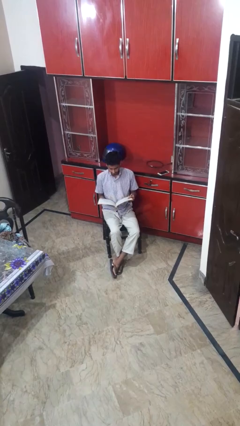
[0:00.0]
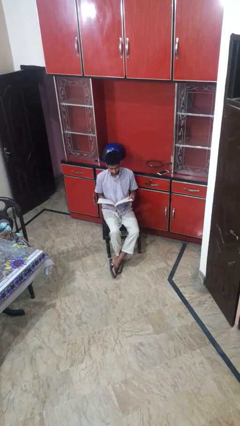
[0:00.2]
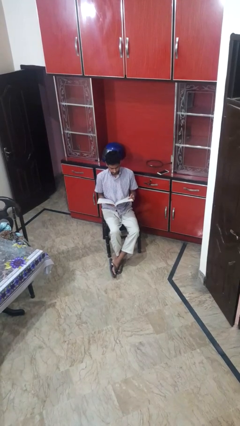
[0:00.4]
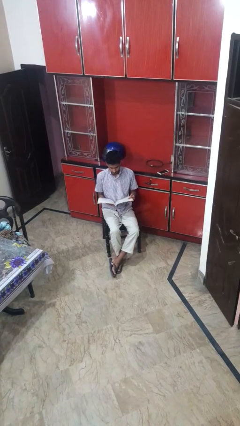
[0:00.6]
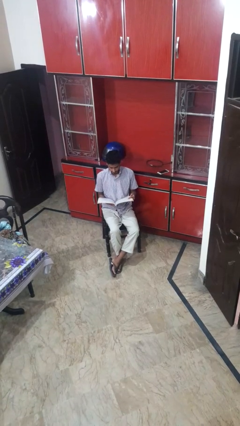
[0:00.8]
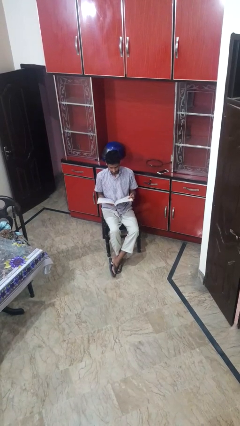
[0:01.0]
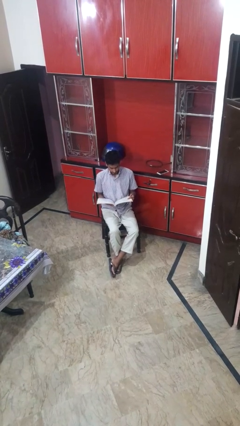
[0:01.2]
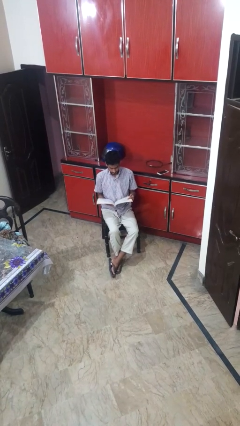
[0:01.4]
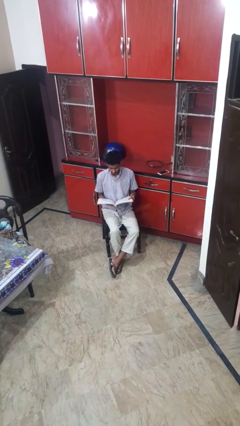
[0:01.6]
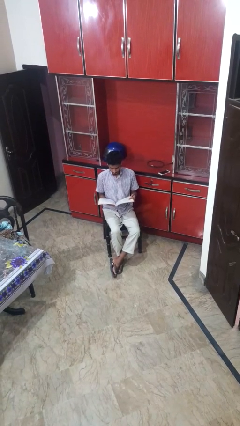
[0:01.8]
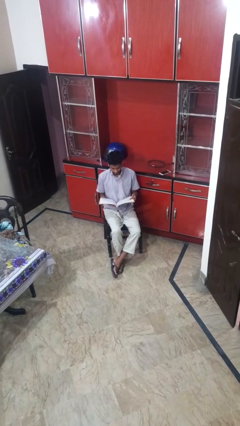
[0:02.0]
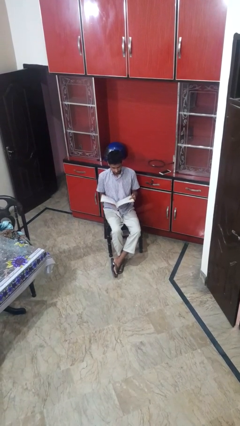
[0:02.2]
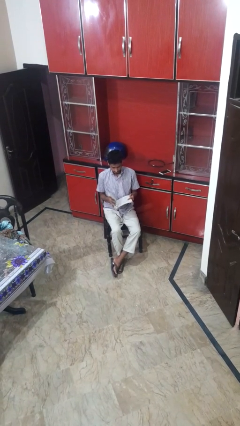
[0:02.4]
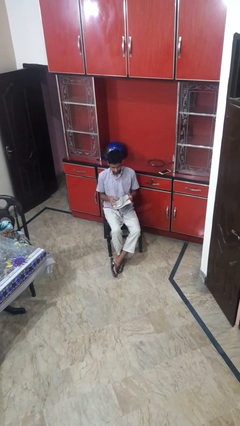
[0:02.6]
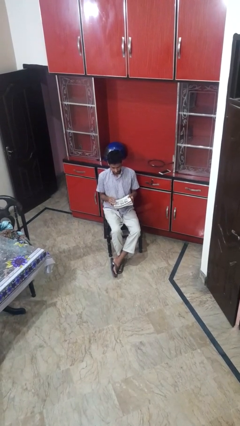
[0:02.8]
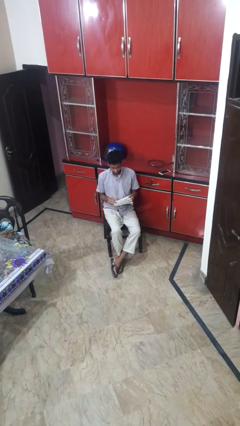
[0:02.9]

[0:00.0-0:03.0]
person reads magazine

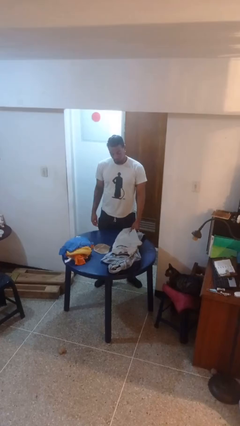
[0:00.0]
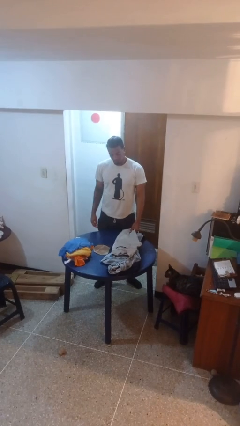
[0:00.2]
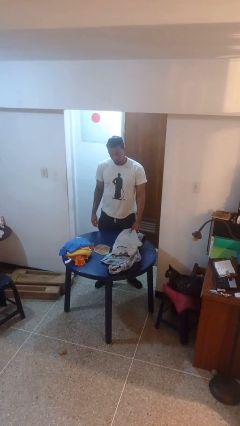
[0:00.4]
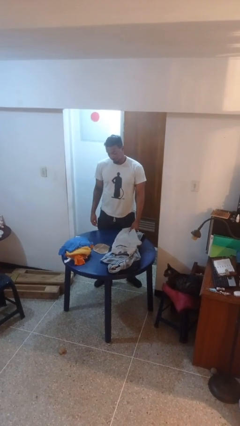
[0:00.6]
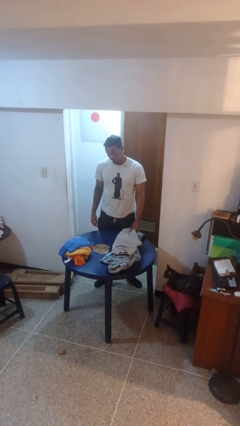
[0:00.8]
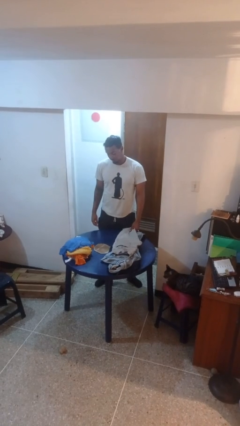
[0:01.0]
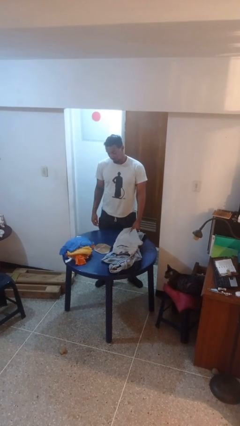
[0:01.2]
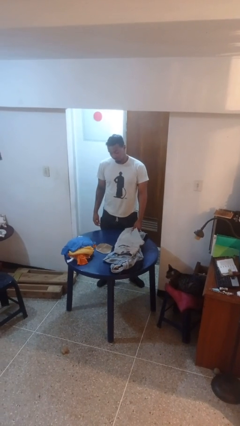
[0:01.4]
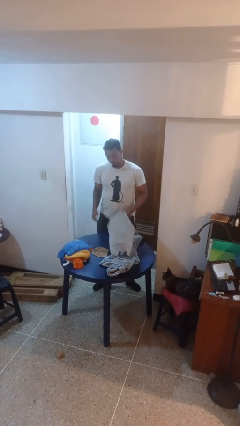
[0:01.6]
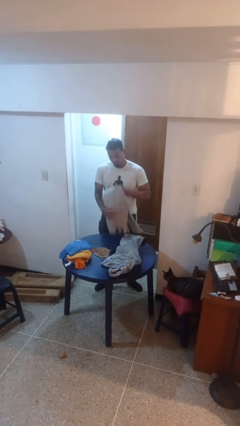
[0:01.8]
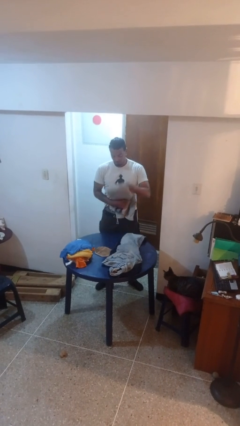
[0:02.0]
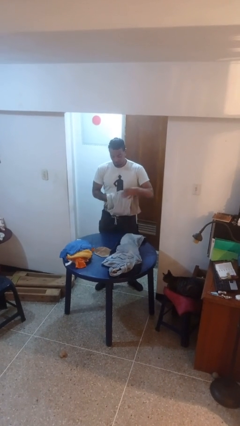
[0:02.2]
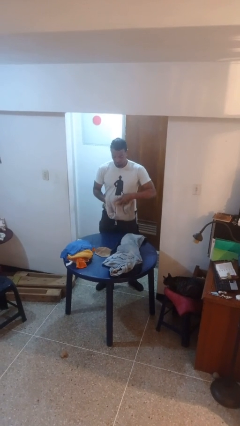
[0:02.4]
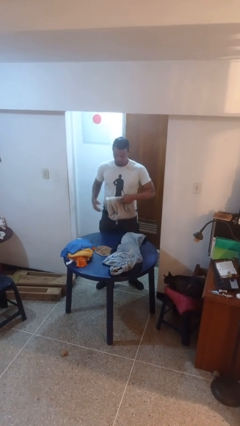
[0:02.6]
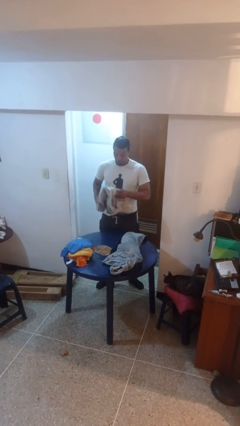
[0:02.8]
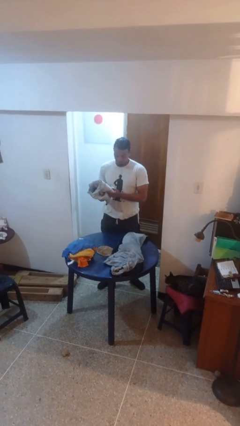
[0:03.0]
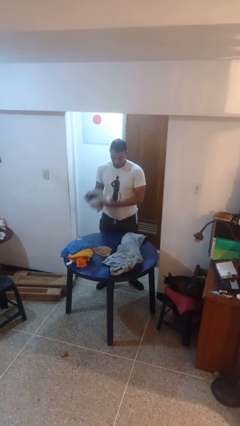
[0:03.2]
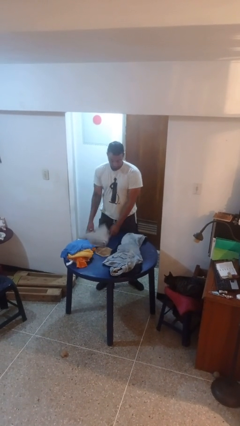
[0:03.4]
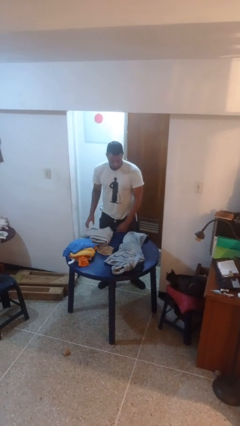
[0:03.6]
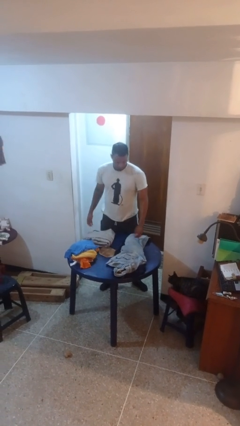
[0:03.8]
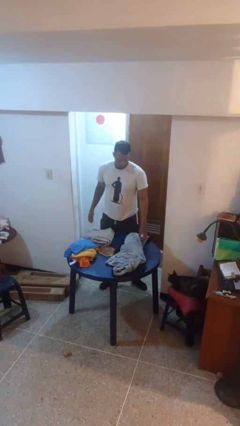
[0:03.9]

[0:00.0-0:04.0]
person folds pants

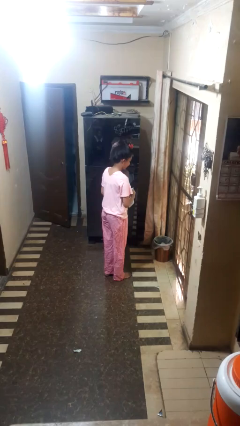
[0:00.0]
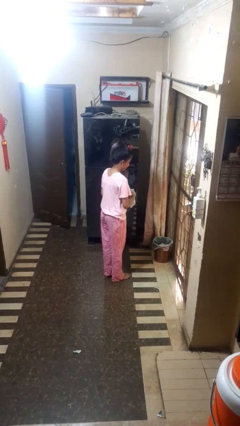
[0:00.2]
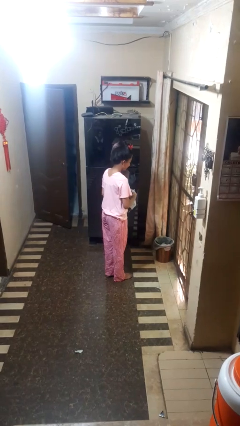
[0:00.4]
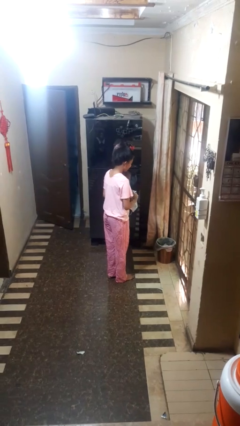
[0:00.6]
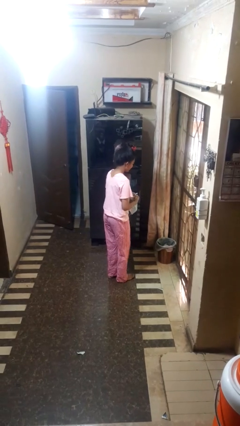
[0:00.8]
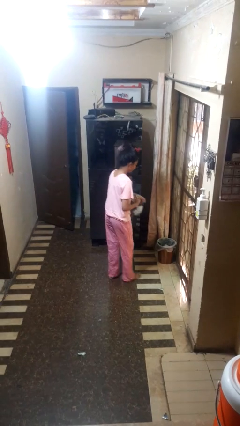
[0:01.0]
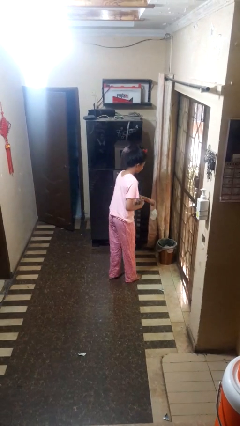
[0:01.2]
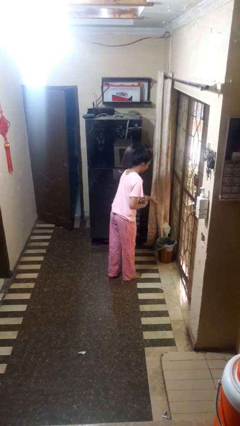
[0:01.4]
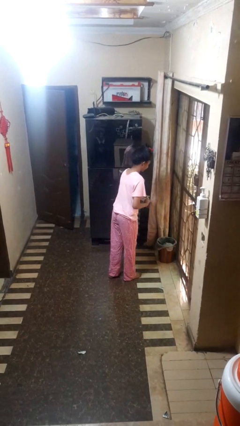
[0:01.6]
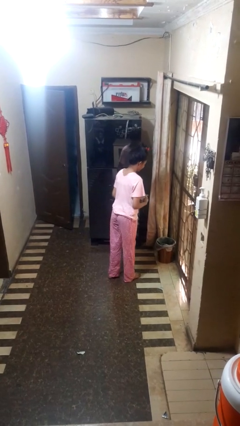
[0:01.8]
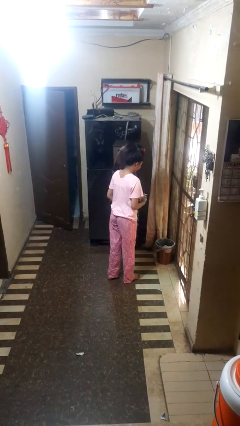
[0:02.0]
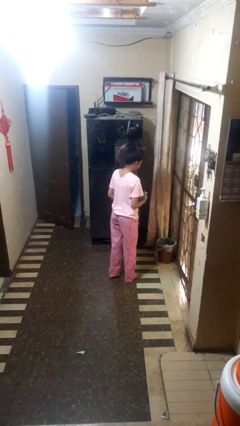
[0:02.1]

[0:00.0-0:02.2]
person discards trash

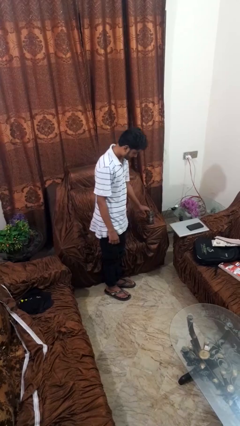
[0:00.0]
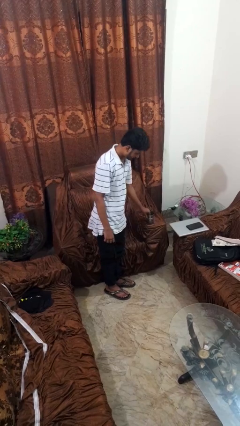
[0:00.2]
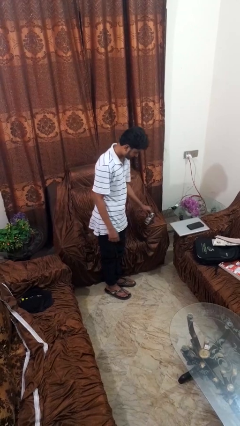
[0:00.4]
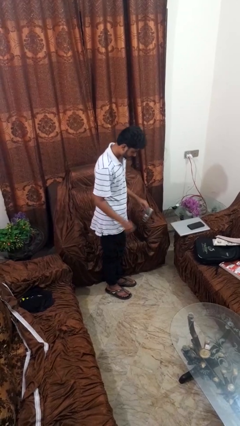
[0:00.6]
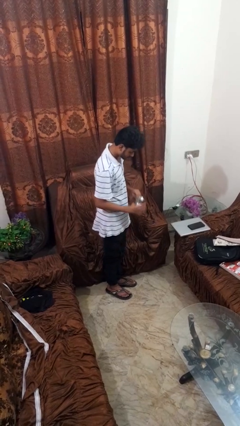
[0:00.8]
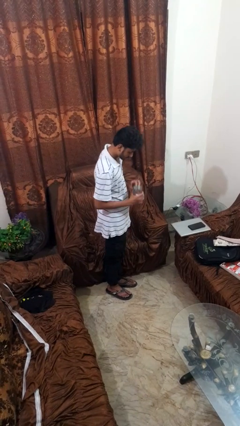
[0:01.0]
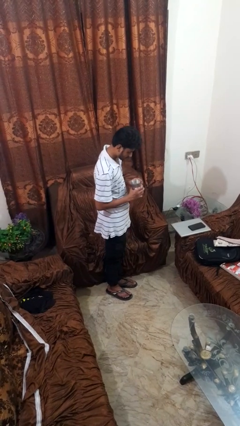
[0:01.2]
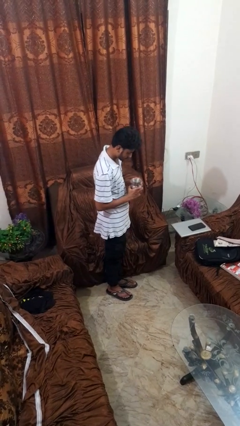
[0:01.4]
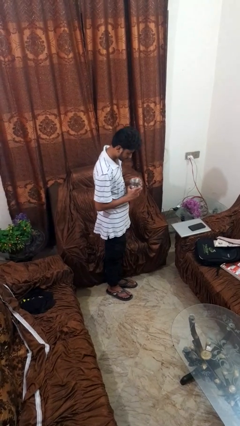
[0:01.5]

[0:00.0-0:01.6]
person picks up object from couch

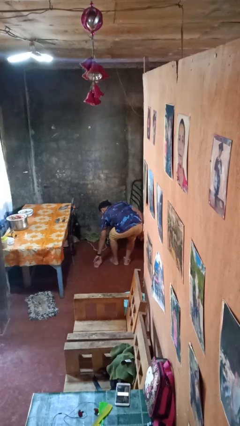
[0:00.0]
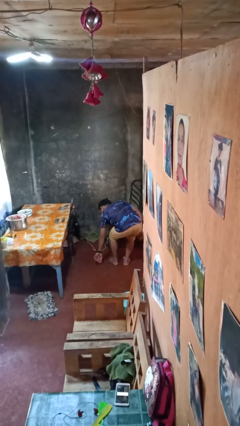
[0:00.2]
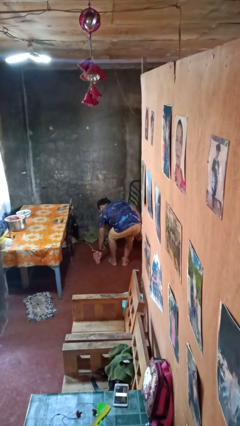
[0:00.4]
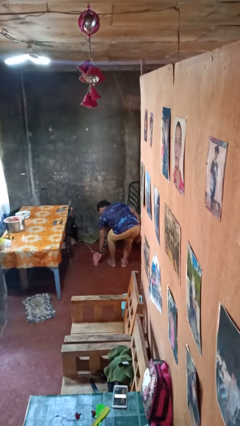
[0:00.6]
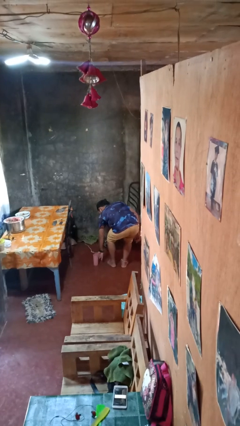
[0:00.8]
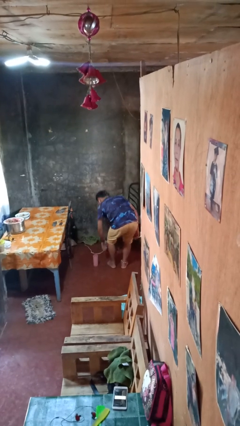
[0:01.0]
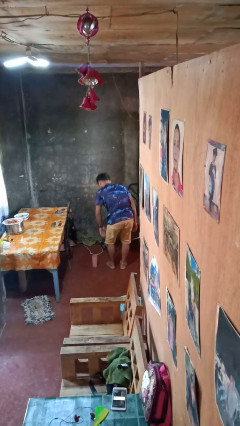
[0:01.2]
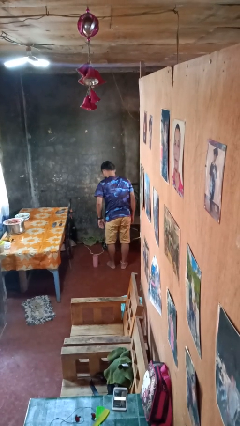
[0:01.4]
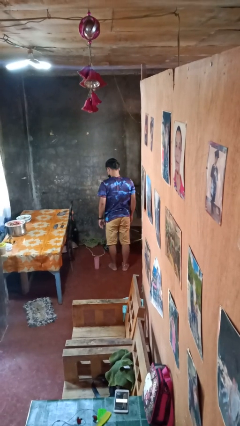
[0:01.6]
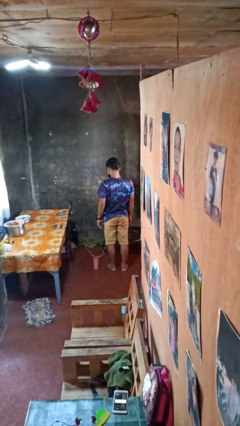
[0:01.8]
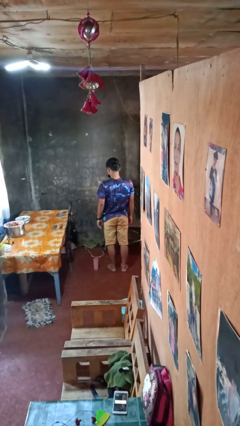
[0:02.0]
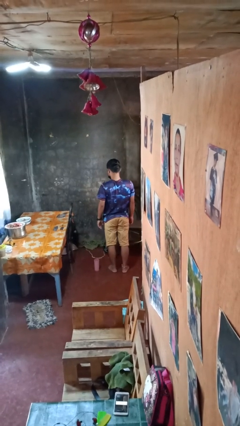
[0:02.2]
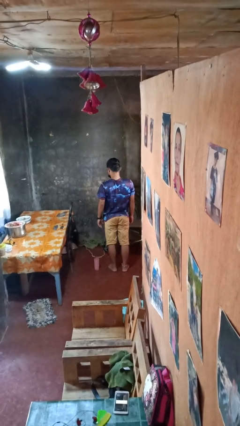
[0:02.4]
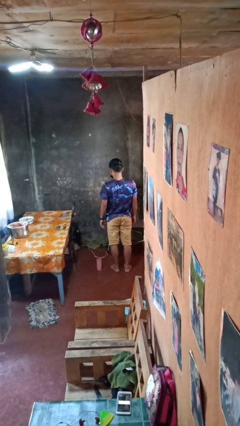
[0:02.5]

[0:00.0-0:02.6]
person sets upright glass

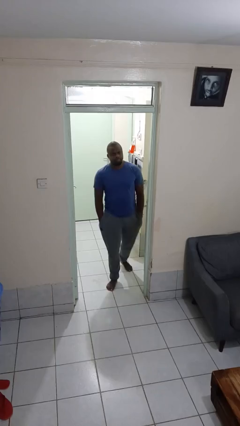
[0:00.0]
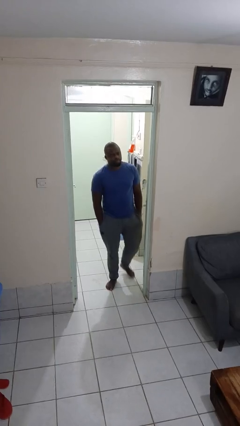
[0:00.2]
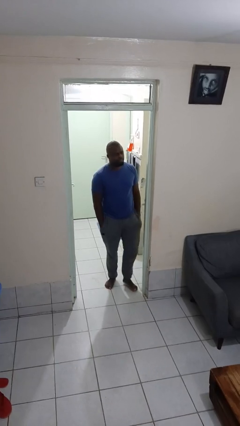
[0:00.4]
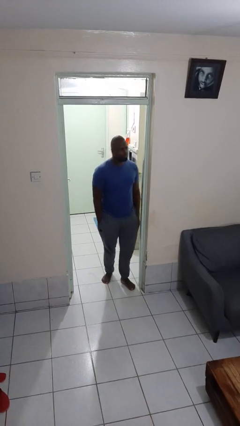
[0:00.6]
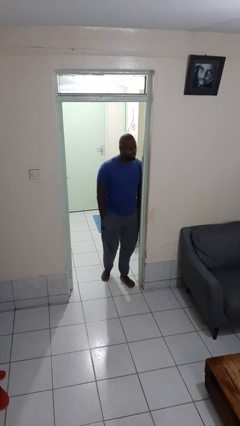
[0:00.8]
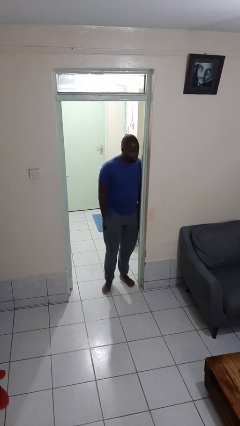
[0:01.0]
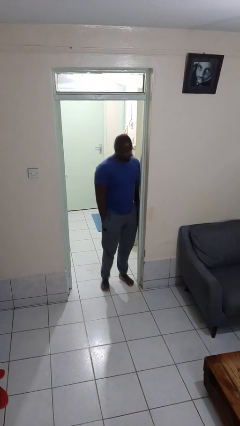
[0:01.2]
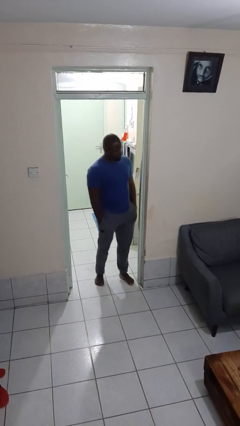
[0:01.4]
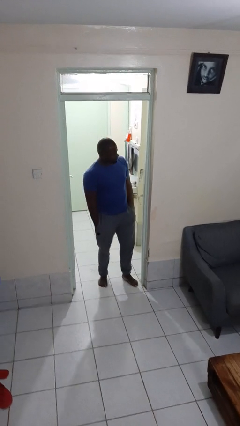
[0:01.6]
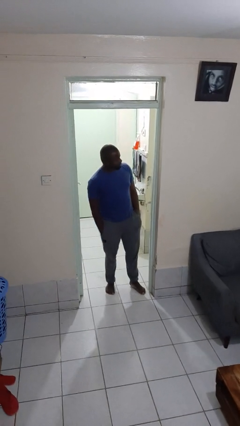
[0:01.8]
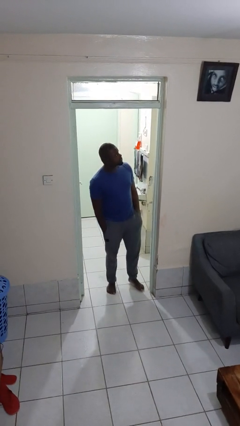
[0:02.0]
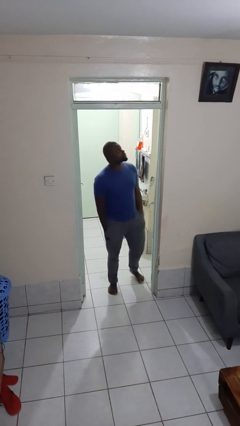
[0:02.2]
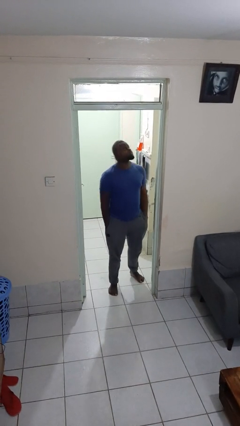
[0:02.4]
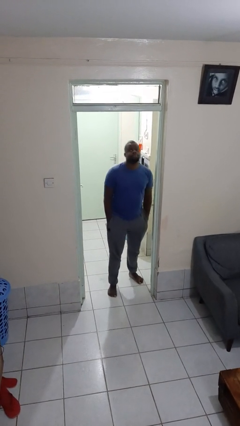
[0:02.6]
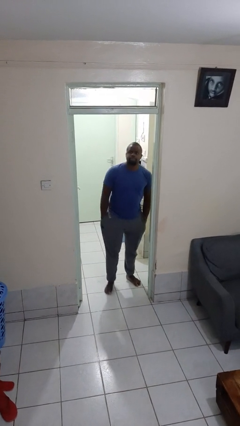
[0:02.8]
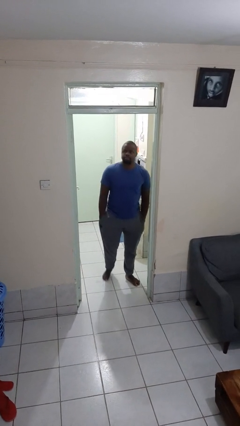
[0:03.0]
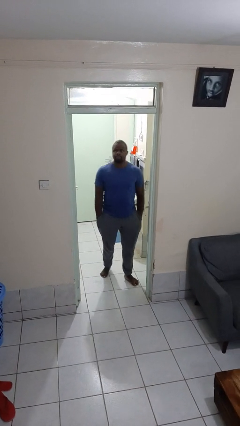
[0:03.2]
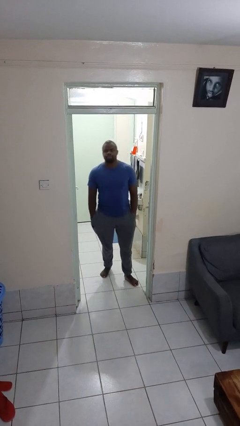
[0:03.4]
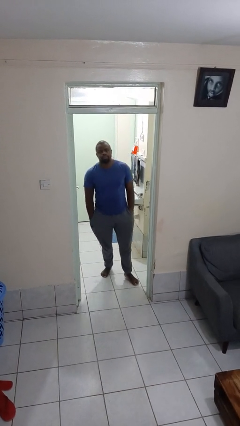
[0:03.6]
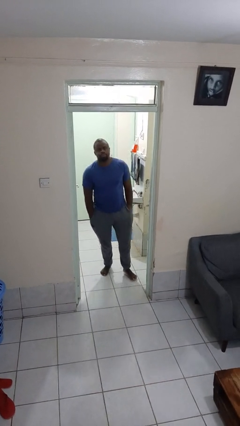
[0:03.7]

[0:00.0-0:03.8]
person bumps into wall

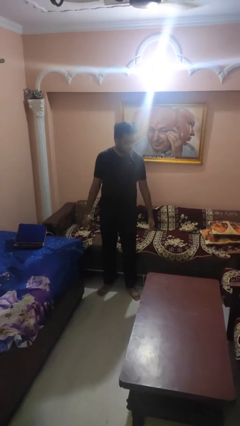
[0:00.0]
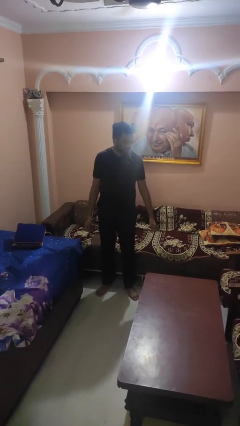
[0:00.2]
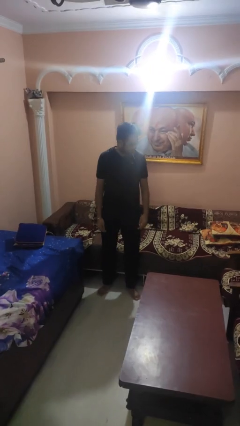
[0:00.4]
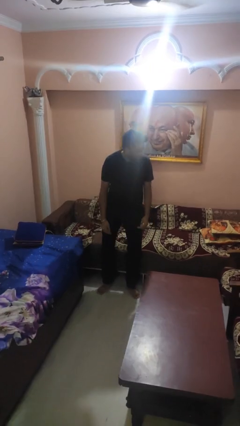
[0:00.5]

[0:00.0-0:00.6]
person lies down on couch
